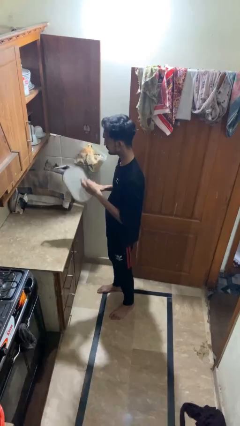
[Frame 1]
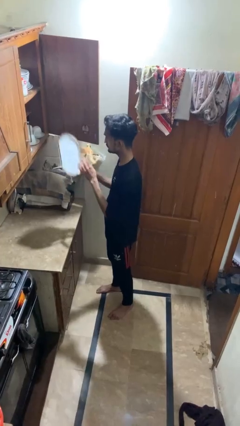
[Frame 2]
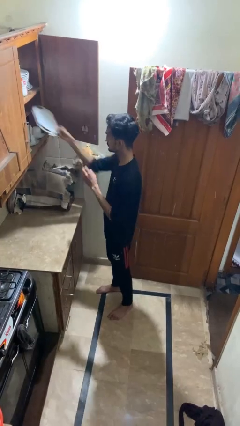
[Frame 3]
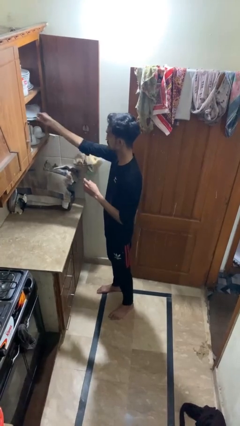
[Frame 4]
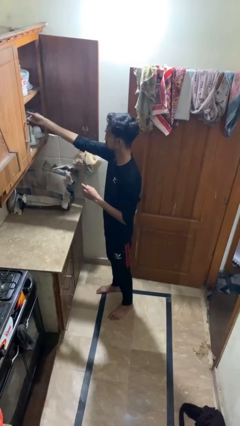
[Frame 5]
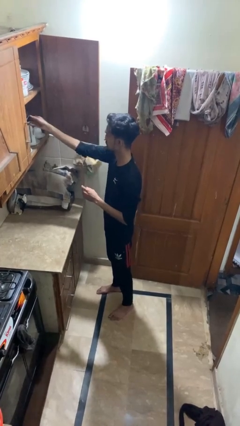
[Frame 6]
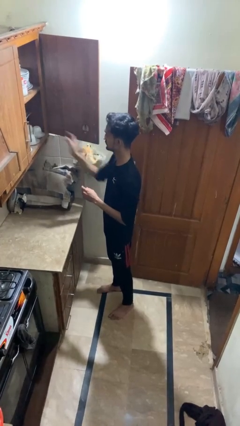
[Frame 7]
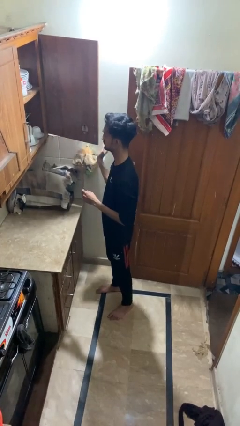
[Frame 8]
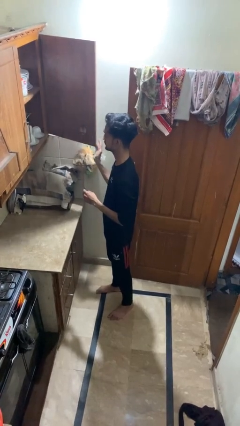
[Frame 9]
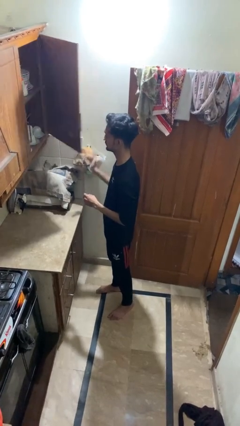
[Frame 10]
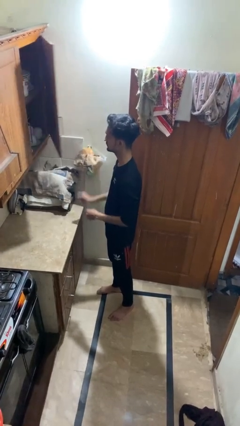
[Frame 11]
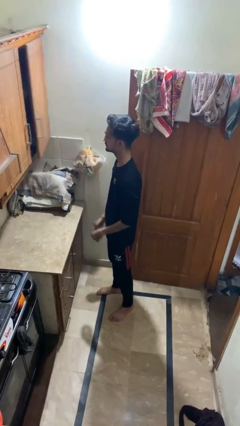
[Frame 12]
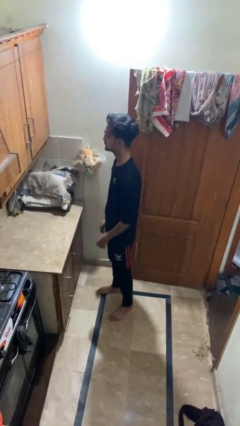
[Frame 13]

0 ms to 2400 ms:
person takes object from cabinet

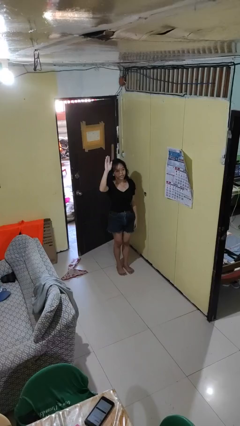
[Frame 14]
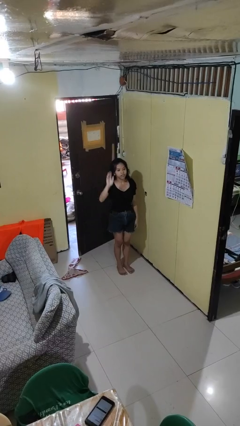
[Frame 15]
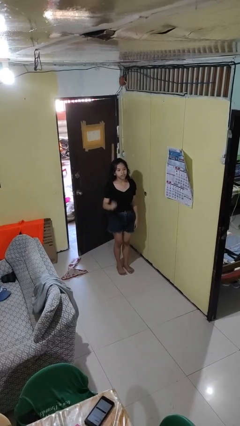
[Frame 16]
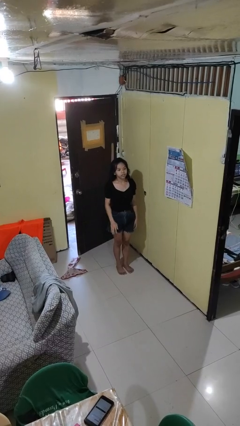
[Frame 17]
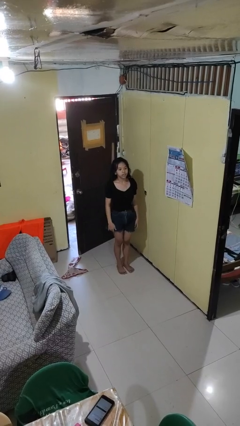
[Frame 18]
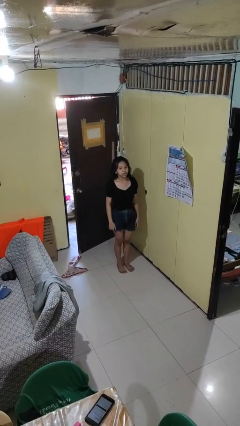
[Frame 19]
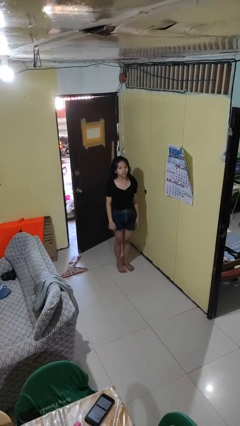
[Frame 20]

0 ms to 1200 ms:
person gestures lower hand

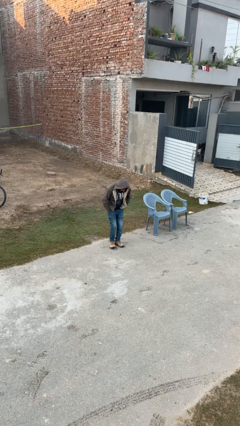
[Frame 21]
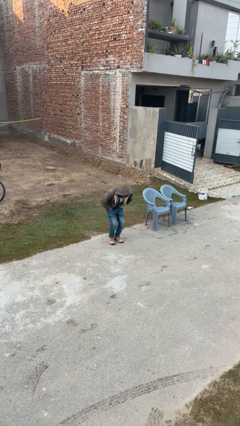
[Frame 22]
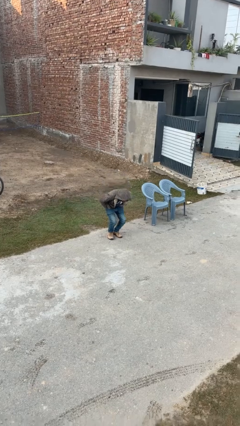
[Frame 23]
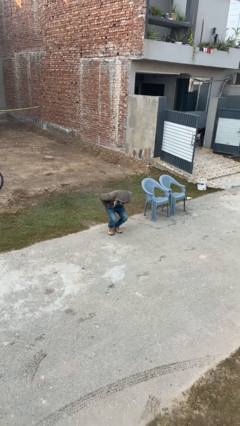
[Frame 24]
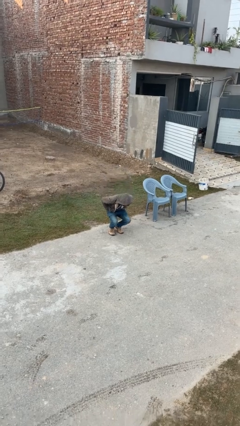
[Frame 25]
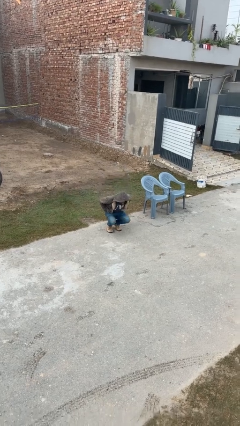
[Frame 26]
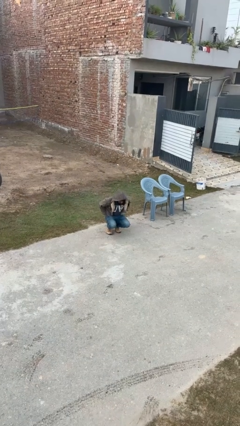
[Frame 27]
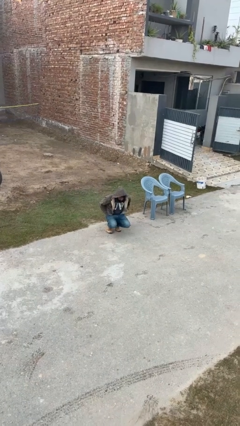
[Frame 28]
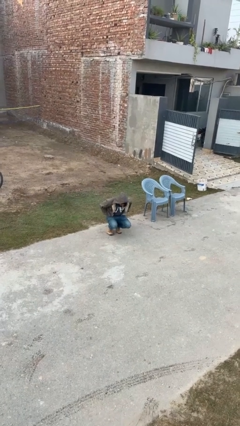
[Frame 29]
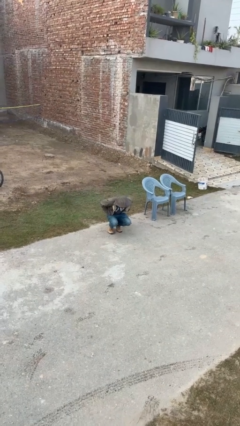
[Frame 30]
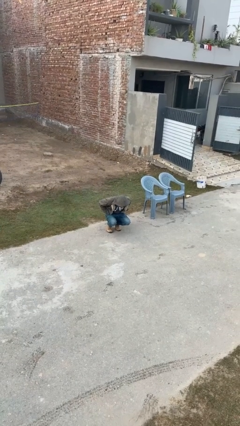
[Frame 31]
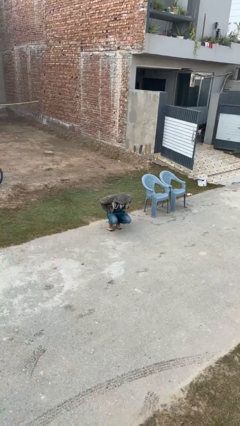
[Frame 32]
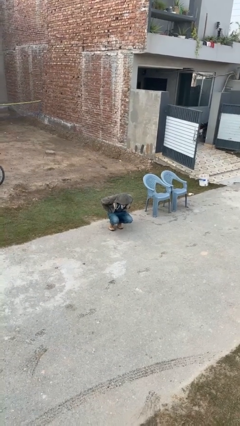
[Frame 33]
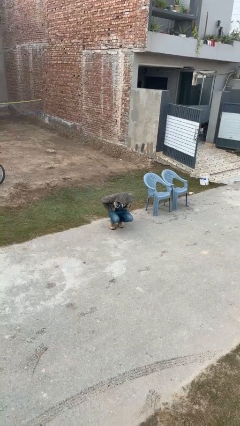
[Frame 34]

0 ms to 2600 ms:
person sits down

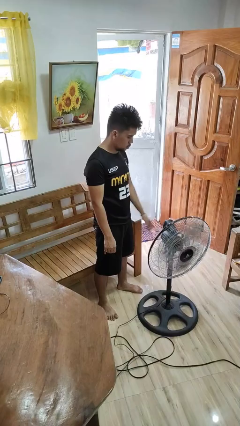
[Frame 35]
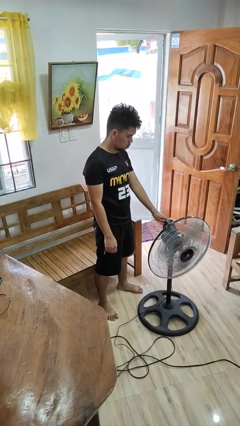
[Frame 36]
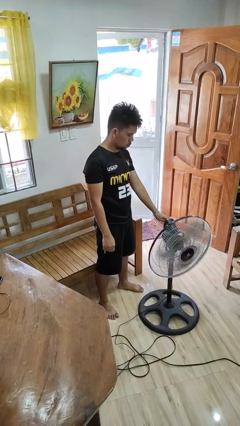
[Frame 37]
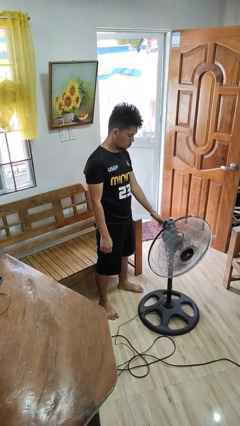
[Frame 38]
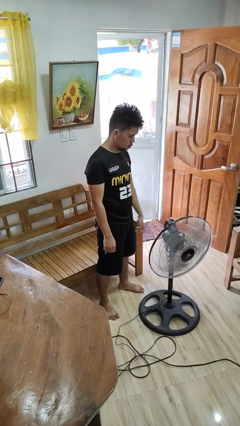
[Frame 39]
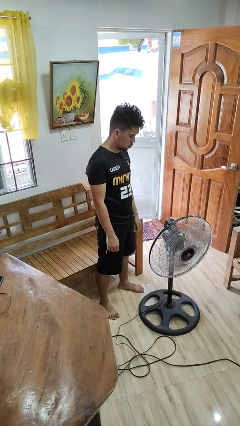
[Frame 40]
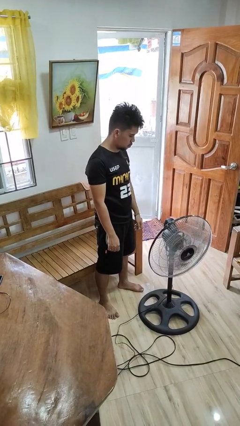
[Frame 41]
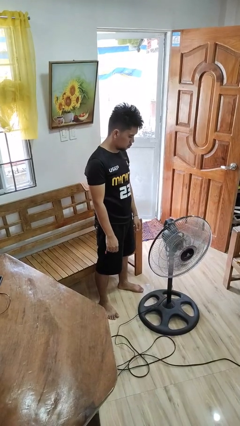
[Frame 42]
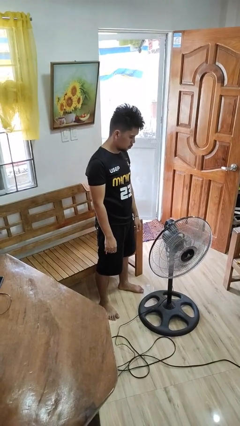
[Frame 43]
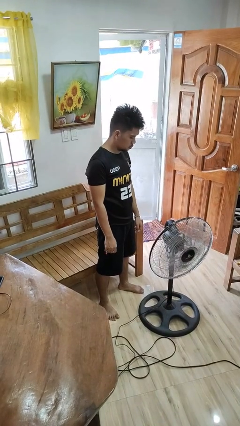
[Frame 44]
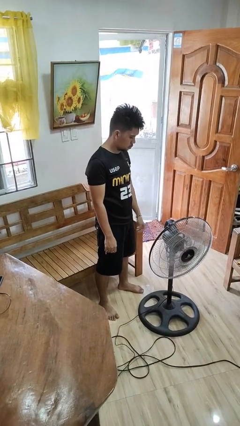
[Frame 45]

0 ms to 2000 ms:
person turns on fan

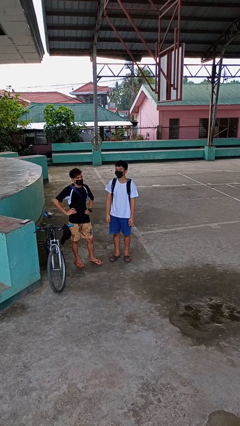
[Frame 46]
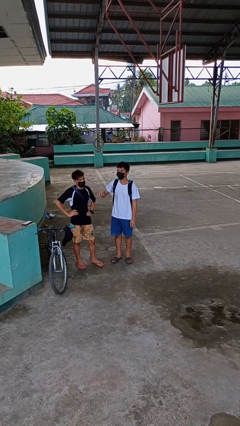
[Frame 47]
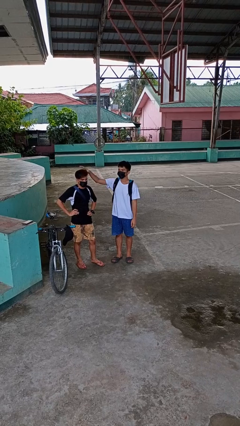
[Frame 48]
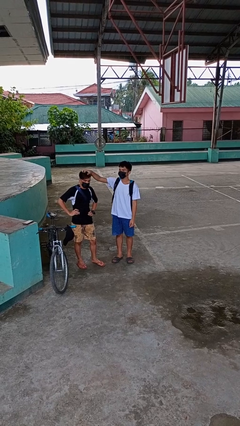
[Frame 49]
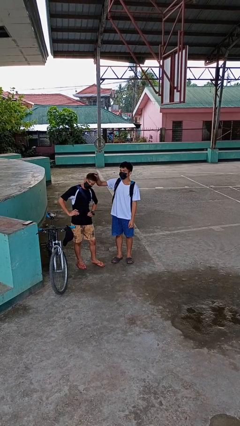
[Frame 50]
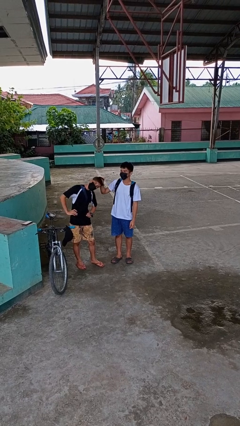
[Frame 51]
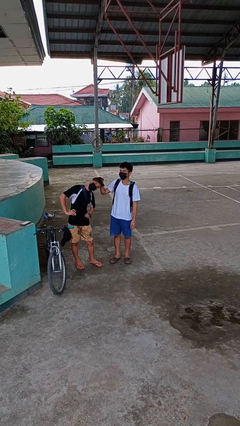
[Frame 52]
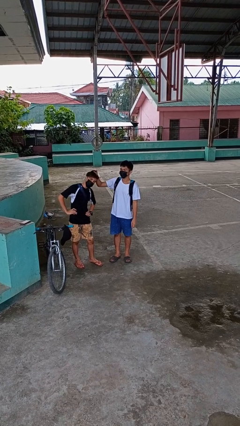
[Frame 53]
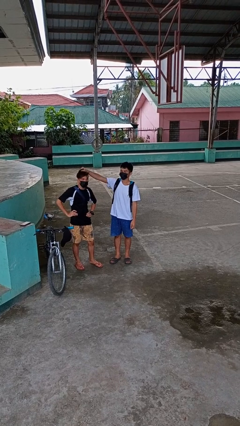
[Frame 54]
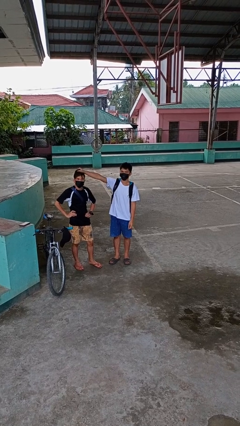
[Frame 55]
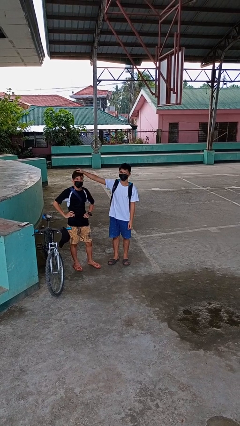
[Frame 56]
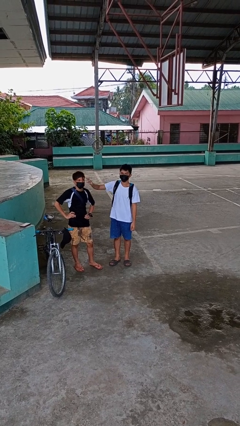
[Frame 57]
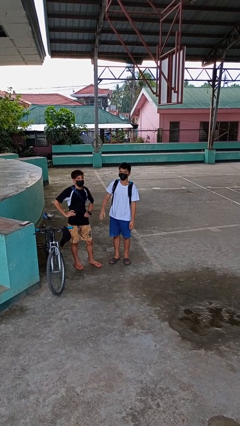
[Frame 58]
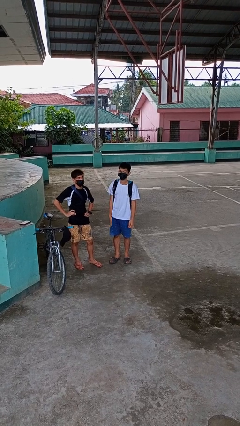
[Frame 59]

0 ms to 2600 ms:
person grabs person by hair

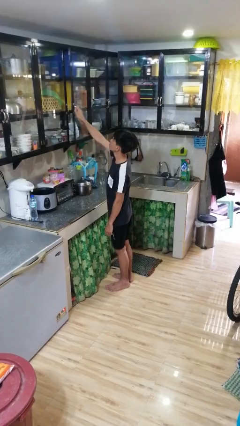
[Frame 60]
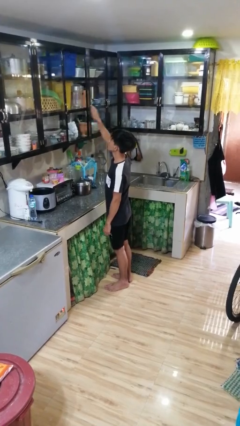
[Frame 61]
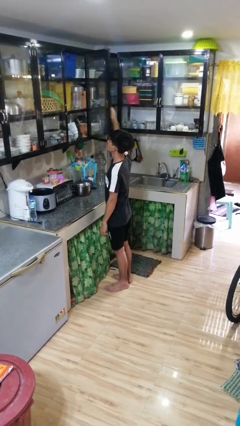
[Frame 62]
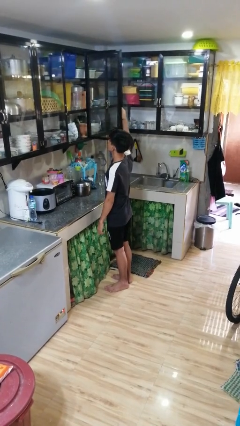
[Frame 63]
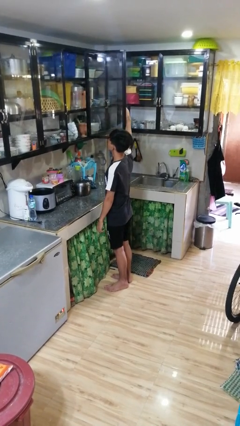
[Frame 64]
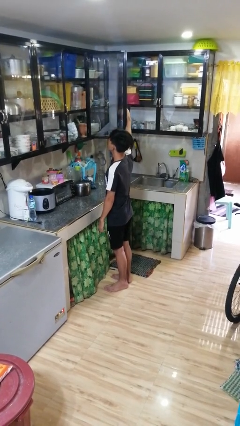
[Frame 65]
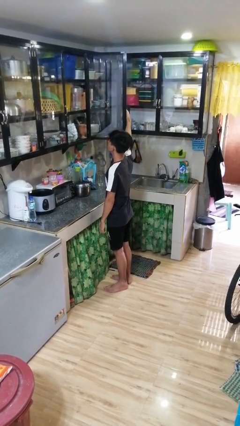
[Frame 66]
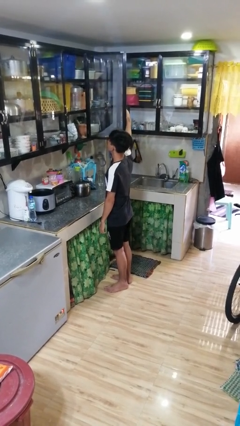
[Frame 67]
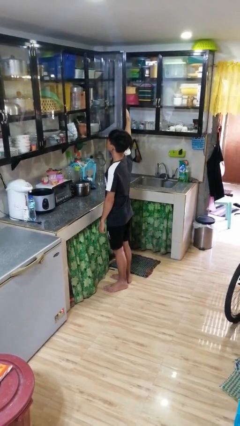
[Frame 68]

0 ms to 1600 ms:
person opens cabinet

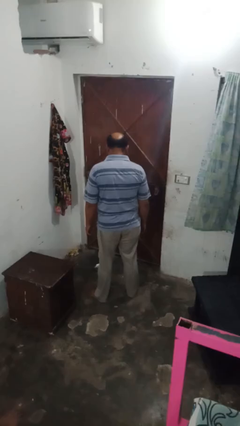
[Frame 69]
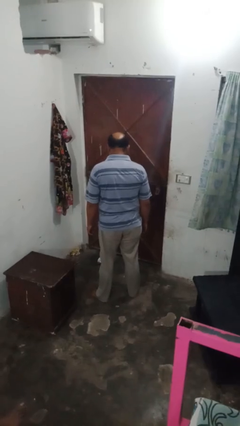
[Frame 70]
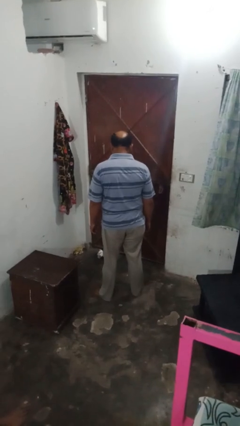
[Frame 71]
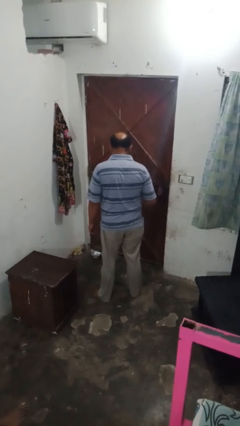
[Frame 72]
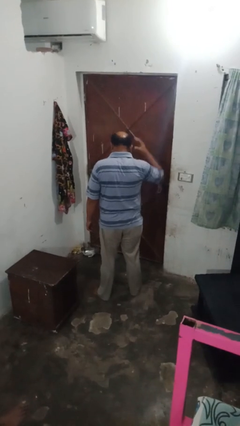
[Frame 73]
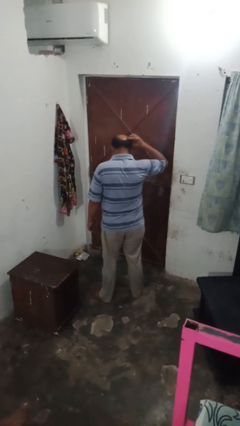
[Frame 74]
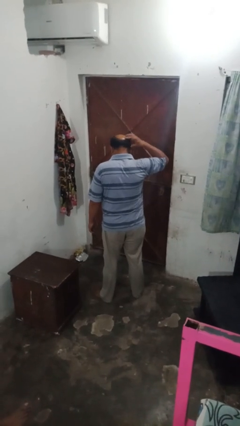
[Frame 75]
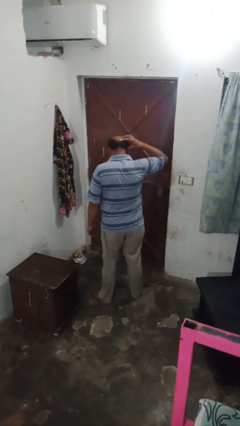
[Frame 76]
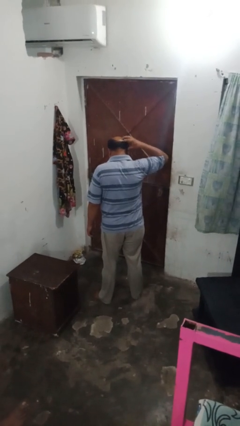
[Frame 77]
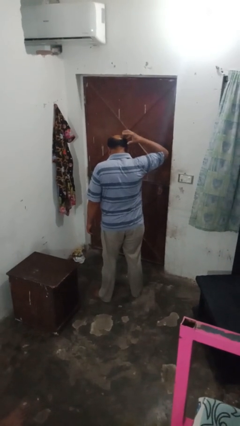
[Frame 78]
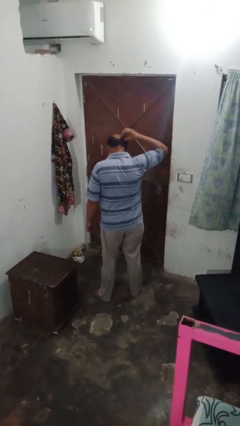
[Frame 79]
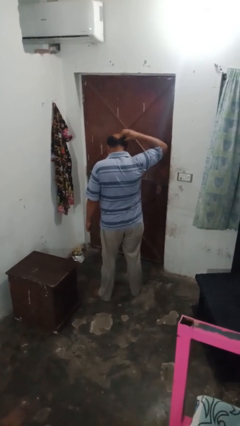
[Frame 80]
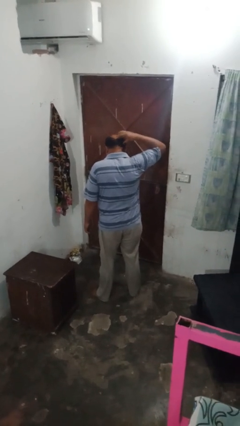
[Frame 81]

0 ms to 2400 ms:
person strokes hair

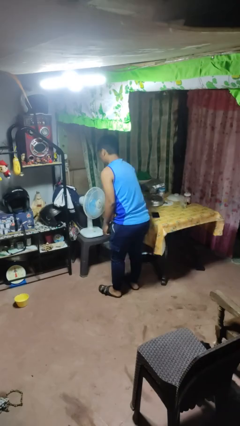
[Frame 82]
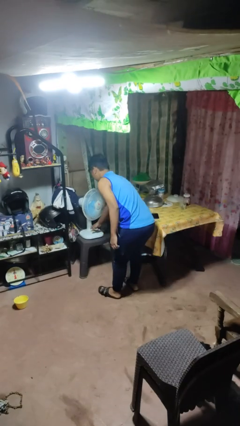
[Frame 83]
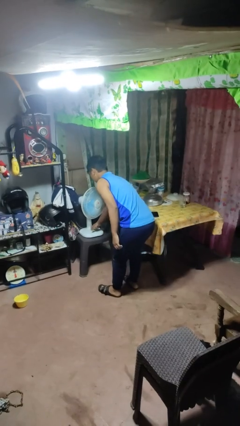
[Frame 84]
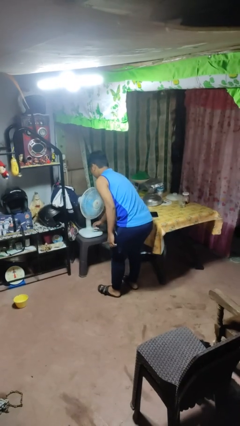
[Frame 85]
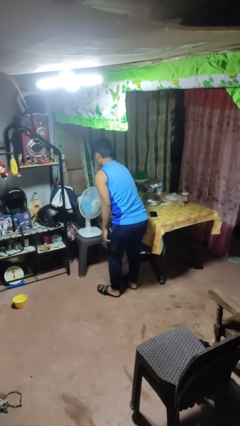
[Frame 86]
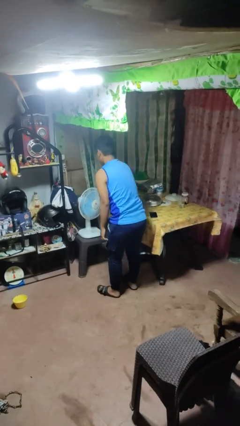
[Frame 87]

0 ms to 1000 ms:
person turns off fan

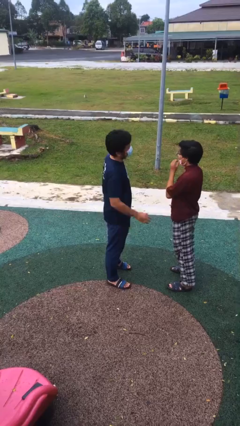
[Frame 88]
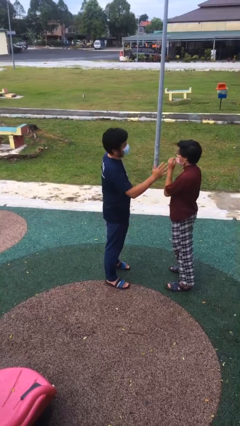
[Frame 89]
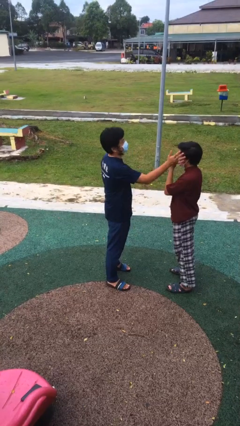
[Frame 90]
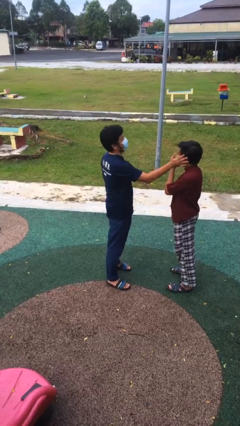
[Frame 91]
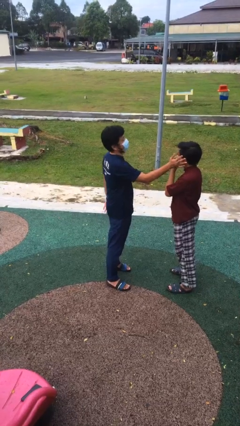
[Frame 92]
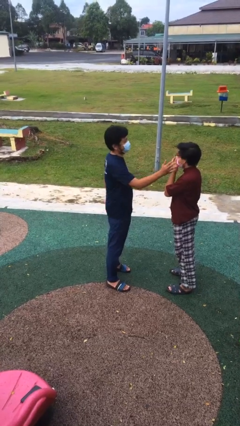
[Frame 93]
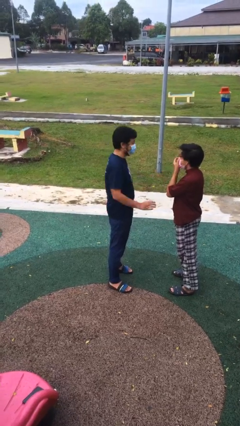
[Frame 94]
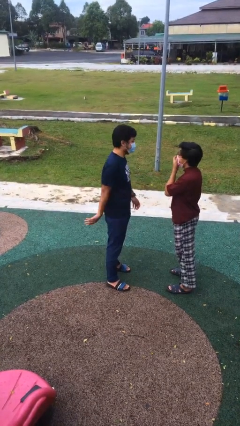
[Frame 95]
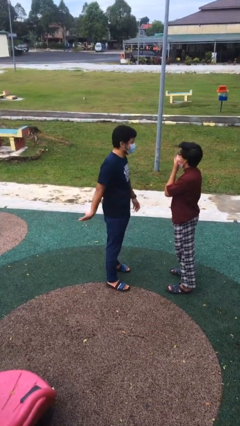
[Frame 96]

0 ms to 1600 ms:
person touches face of person
